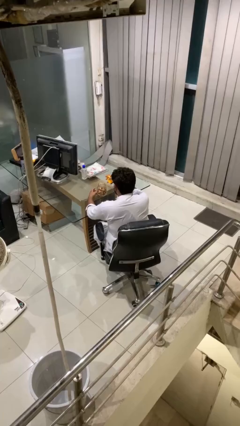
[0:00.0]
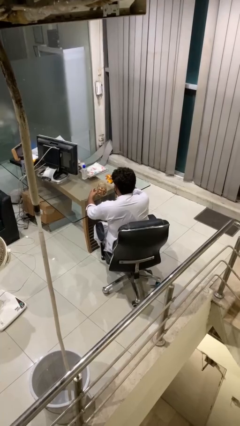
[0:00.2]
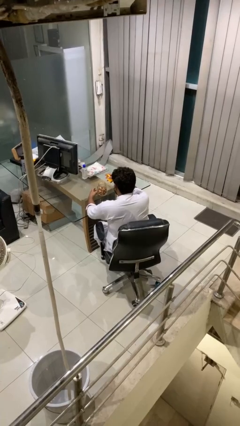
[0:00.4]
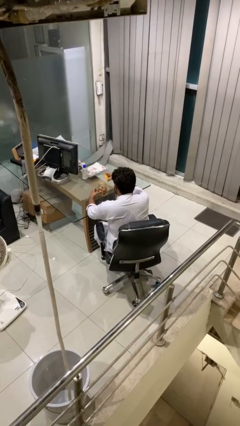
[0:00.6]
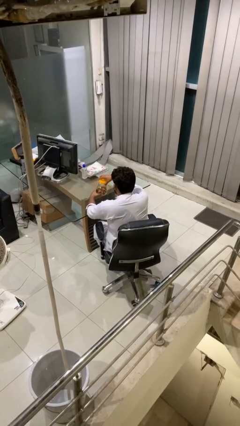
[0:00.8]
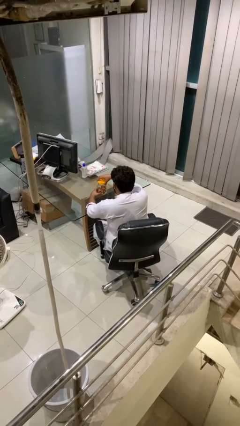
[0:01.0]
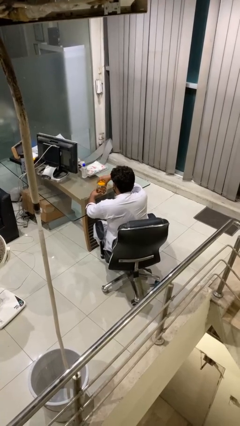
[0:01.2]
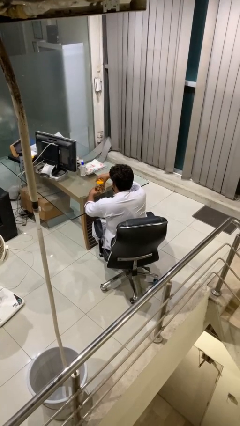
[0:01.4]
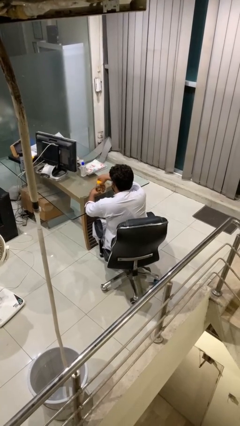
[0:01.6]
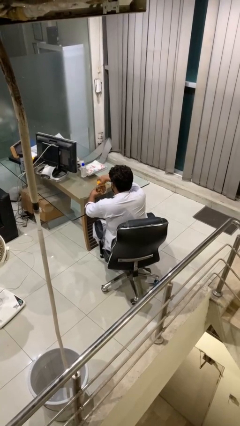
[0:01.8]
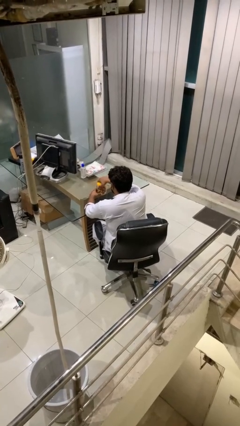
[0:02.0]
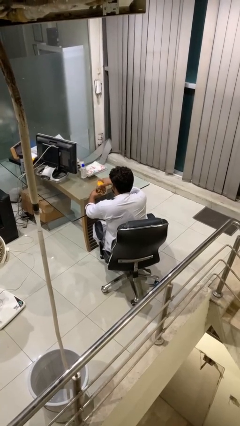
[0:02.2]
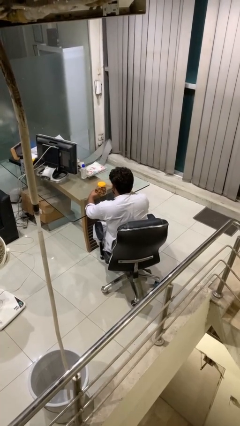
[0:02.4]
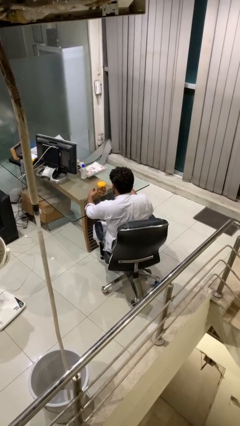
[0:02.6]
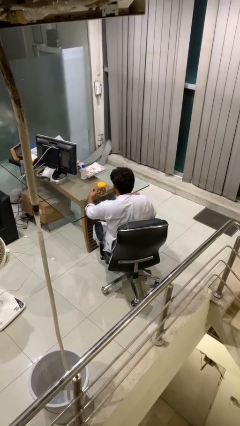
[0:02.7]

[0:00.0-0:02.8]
person closes jar

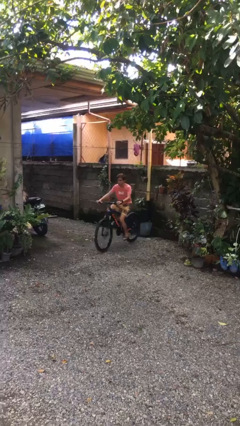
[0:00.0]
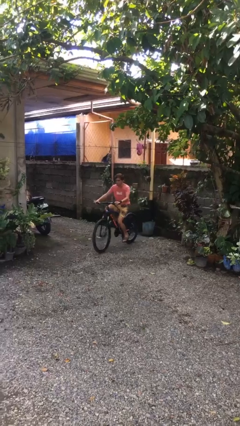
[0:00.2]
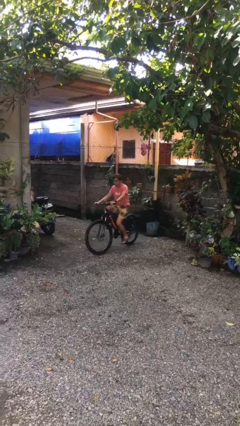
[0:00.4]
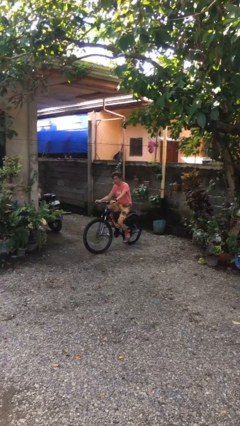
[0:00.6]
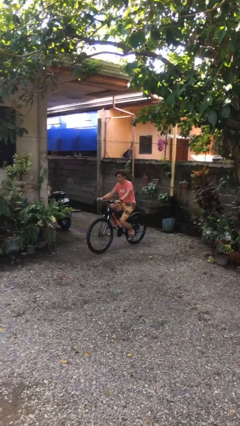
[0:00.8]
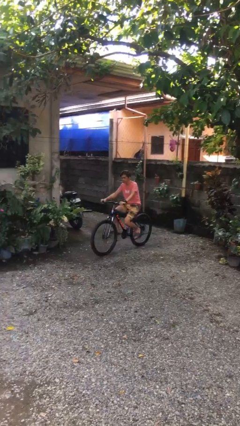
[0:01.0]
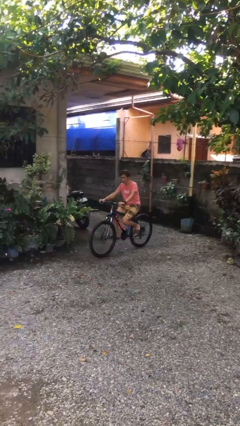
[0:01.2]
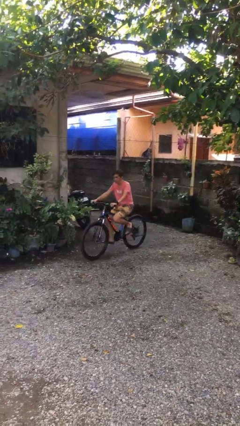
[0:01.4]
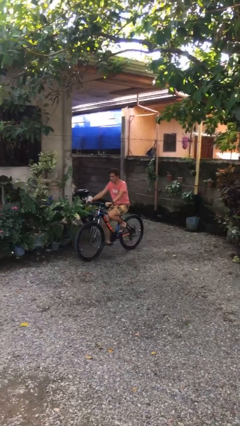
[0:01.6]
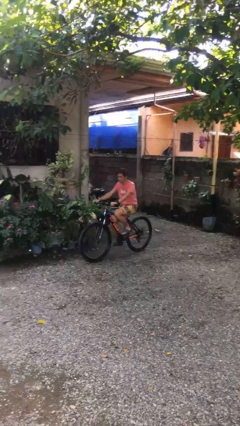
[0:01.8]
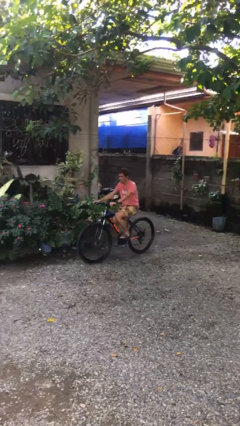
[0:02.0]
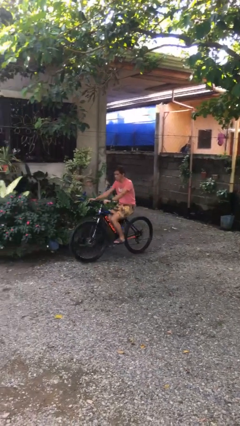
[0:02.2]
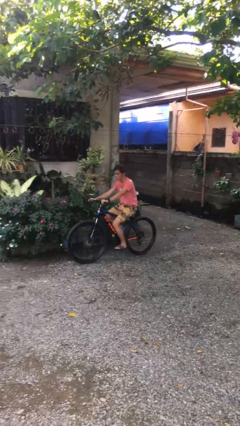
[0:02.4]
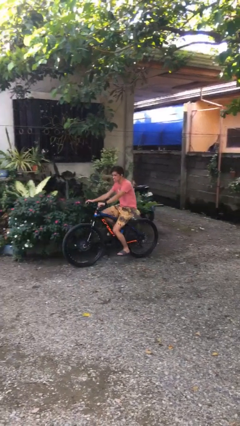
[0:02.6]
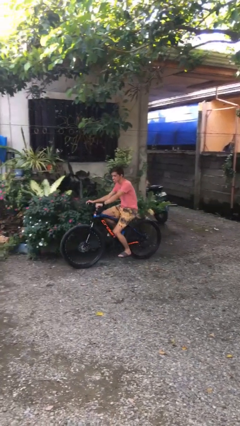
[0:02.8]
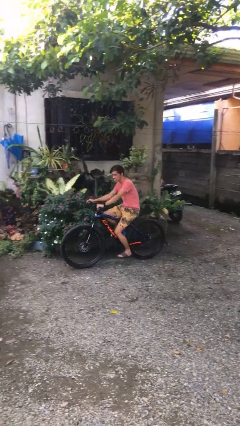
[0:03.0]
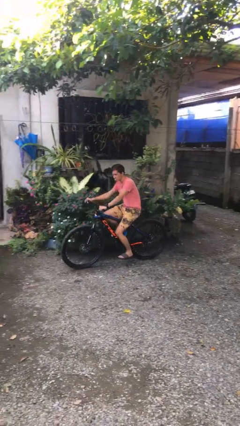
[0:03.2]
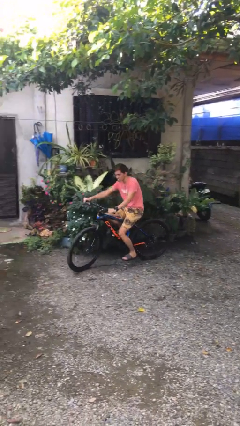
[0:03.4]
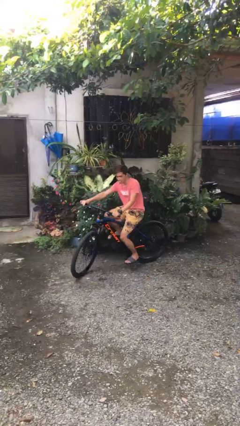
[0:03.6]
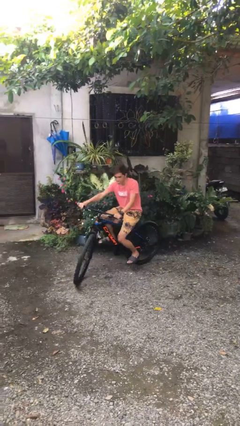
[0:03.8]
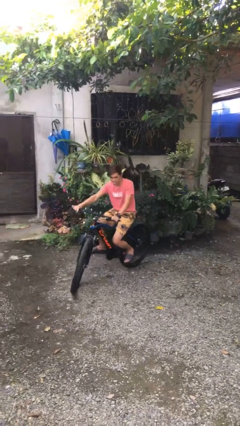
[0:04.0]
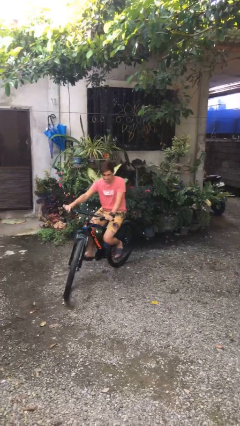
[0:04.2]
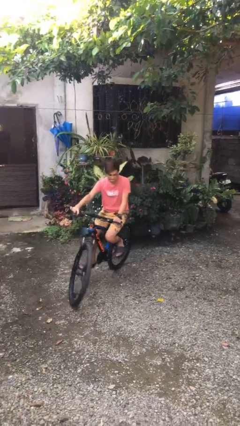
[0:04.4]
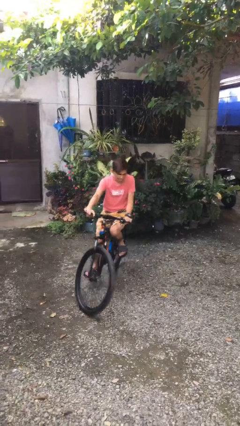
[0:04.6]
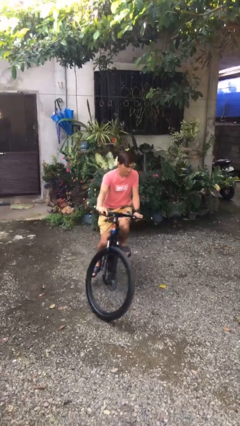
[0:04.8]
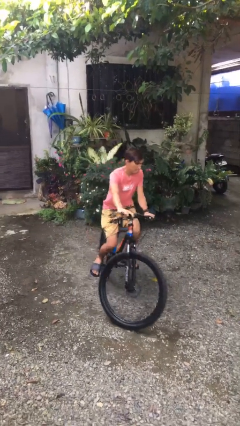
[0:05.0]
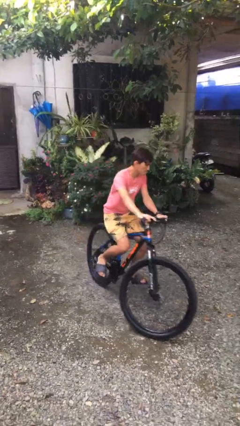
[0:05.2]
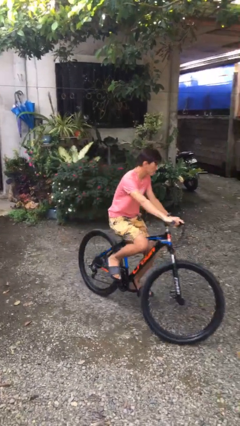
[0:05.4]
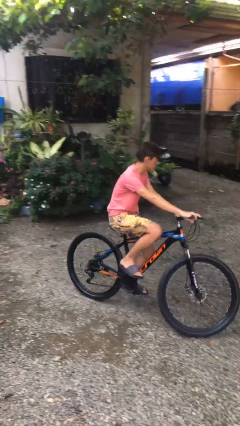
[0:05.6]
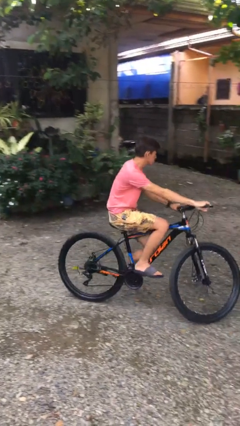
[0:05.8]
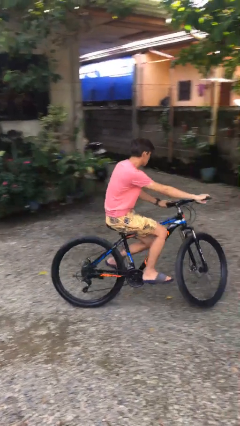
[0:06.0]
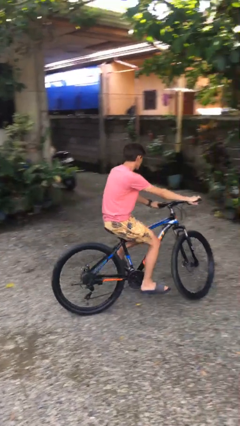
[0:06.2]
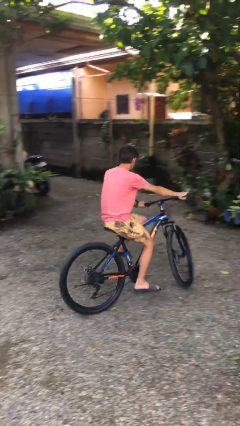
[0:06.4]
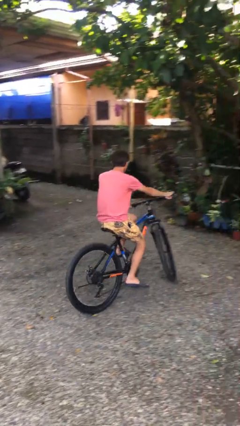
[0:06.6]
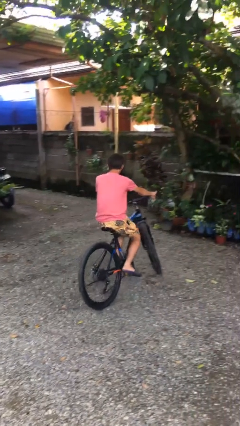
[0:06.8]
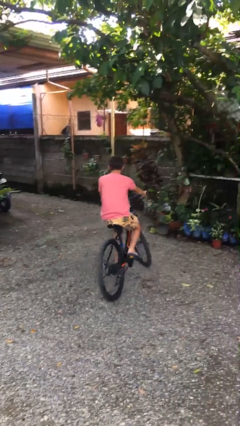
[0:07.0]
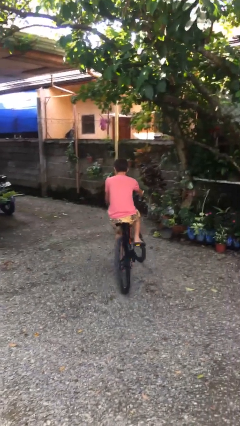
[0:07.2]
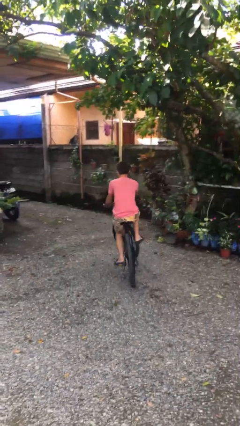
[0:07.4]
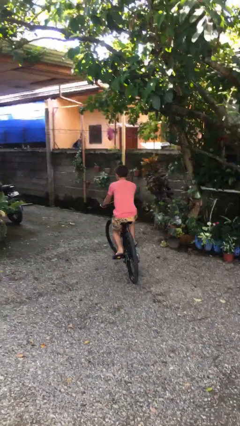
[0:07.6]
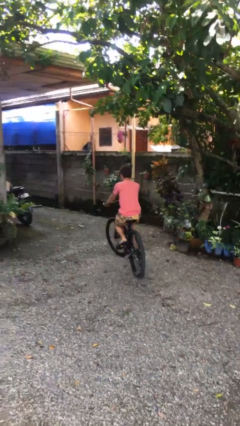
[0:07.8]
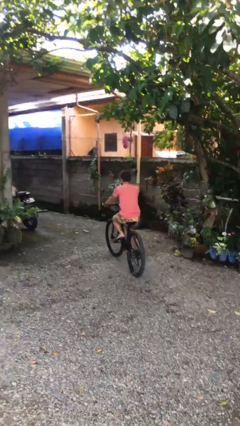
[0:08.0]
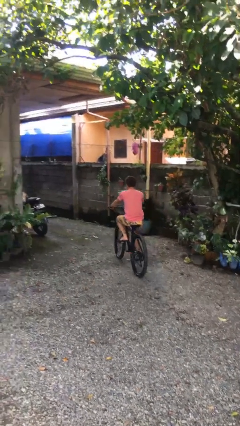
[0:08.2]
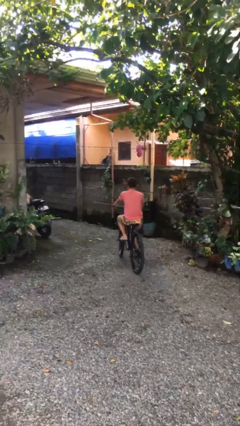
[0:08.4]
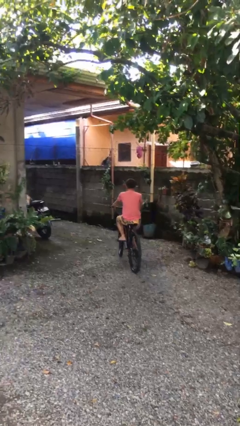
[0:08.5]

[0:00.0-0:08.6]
person rides bicycle

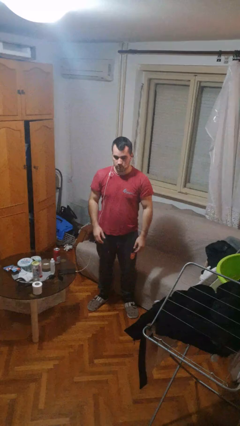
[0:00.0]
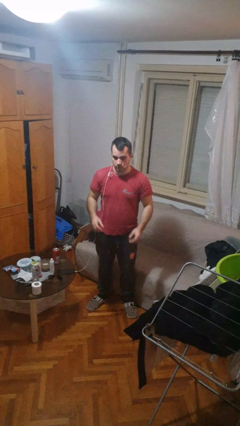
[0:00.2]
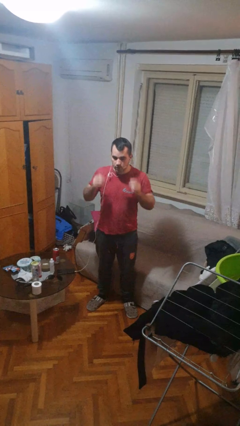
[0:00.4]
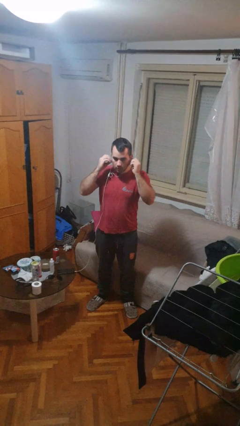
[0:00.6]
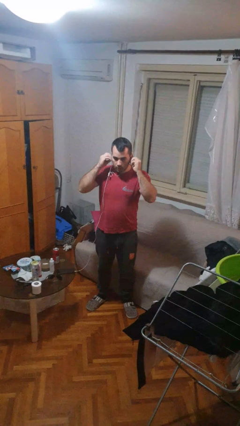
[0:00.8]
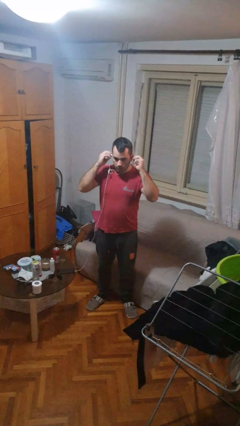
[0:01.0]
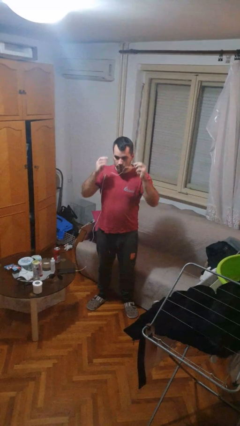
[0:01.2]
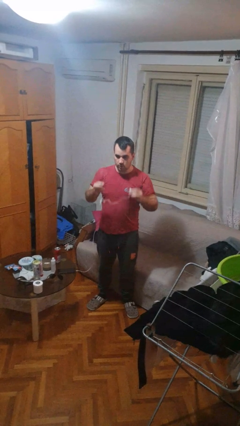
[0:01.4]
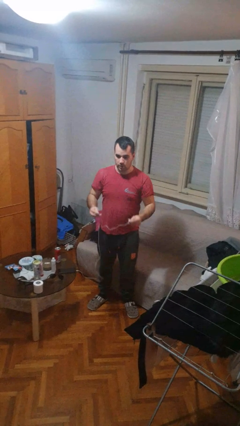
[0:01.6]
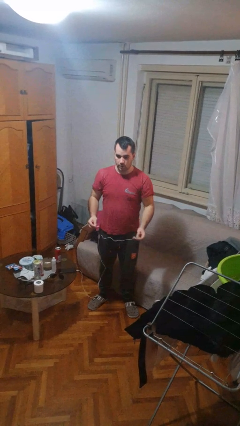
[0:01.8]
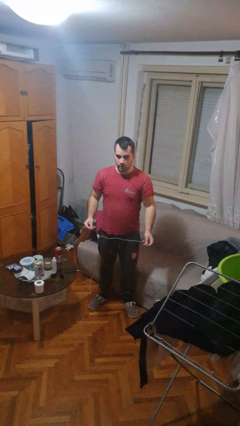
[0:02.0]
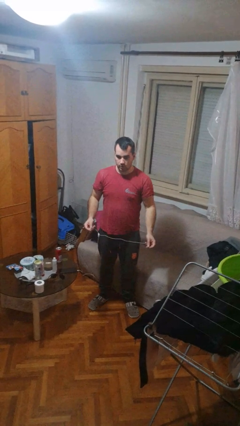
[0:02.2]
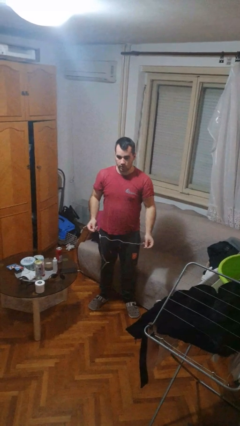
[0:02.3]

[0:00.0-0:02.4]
person takes off headphones

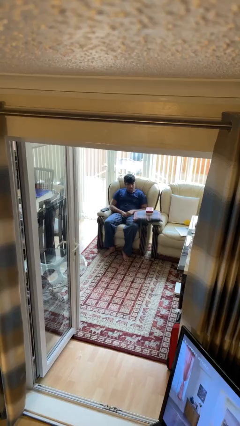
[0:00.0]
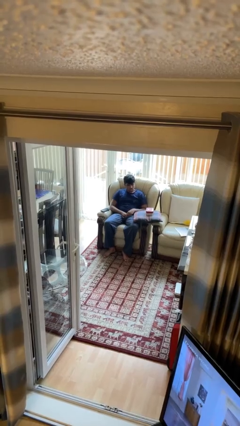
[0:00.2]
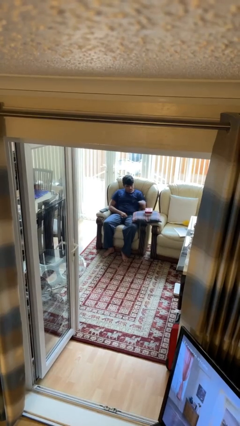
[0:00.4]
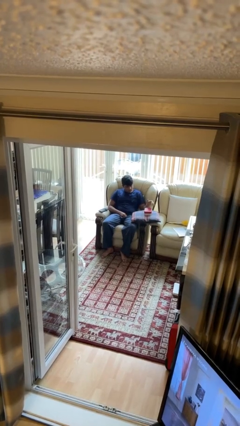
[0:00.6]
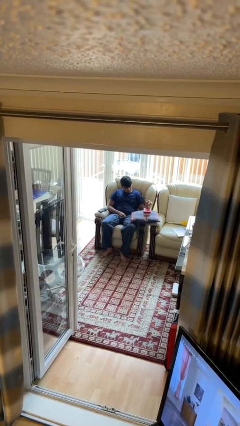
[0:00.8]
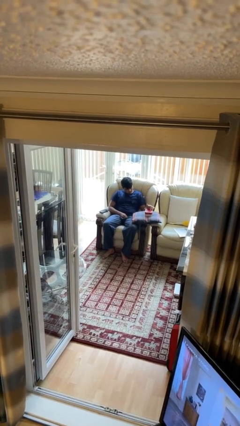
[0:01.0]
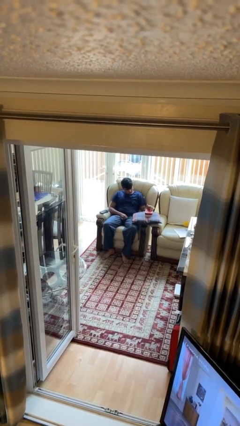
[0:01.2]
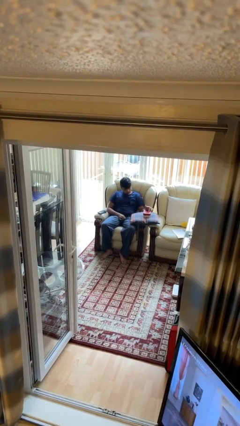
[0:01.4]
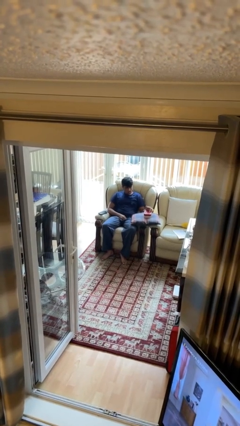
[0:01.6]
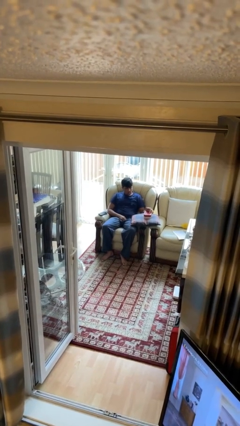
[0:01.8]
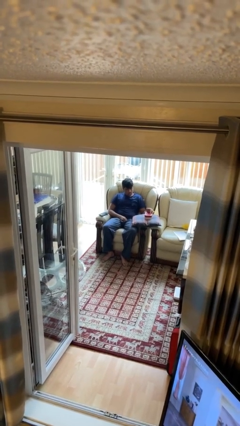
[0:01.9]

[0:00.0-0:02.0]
person taps object with finger

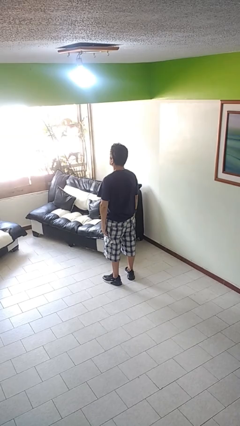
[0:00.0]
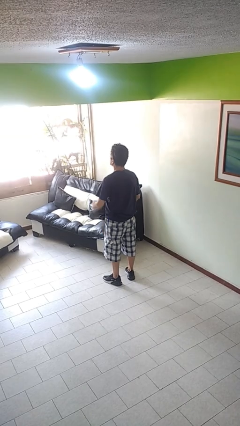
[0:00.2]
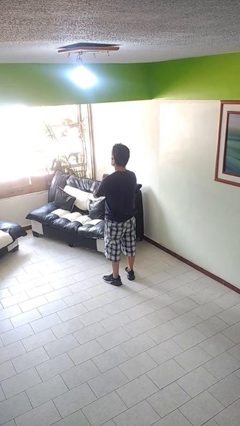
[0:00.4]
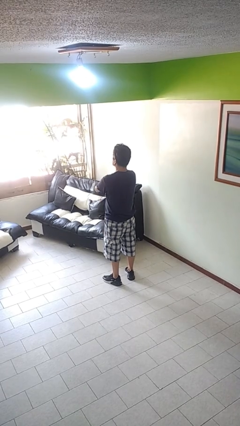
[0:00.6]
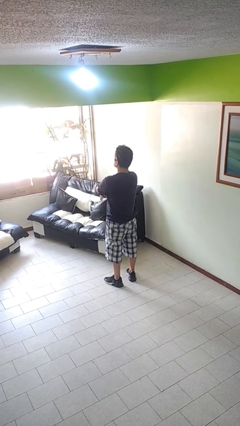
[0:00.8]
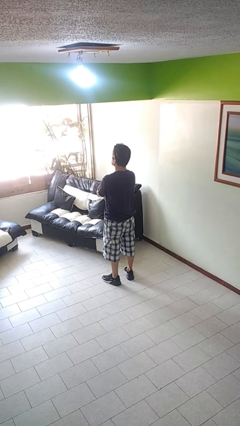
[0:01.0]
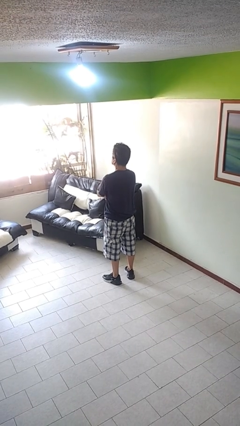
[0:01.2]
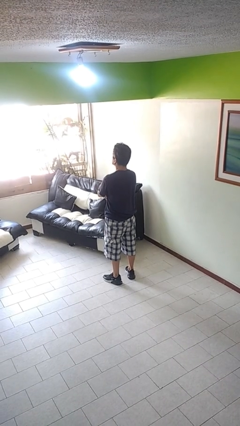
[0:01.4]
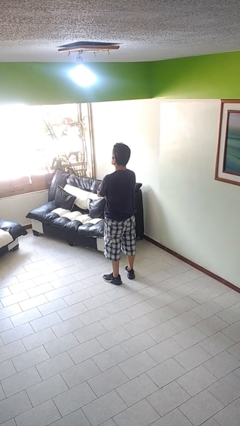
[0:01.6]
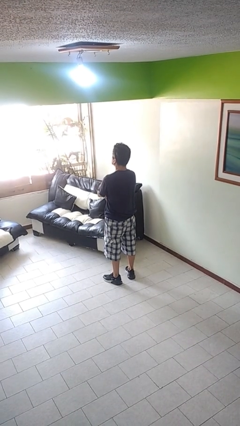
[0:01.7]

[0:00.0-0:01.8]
person crosses arms

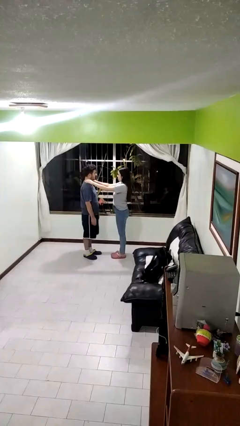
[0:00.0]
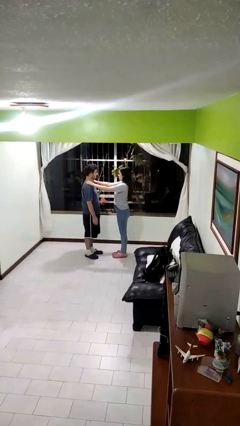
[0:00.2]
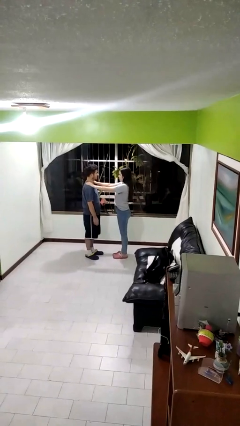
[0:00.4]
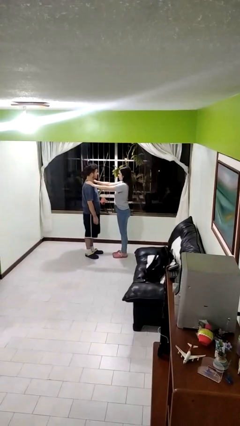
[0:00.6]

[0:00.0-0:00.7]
person grabs person by shoulder
